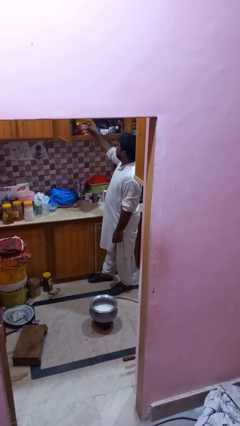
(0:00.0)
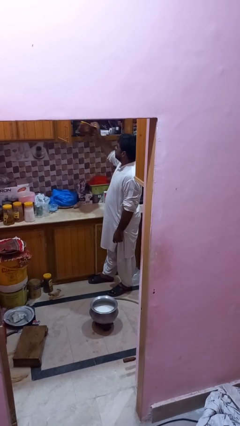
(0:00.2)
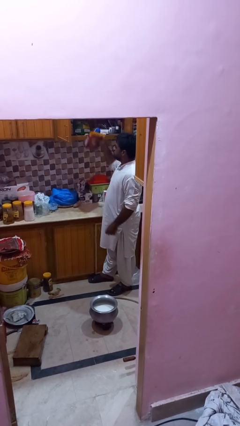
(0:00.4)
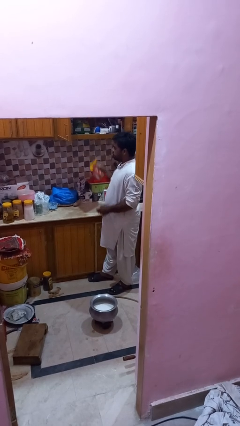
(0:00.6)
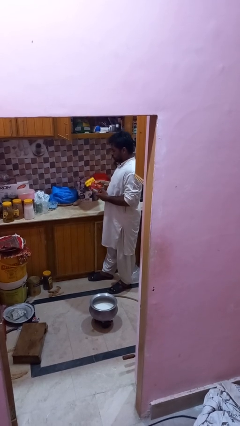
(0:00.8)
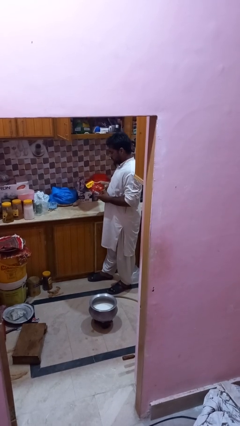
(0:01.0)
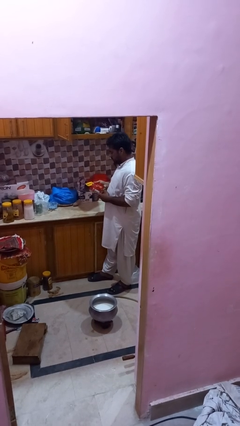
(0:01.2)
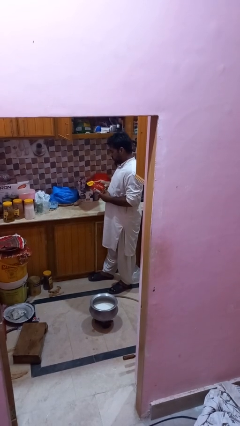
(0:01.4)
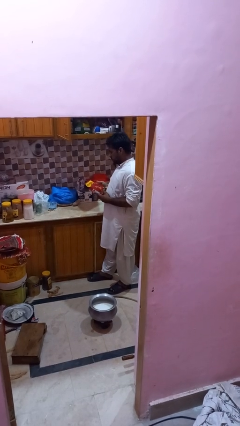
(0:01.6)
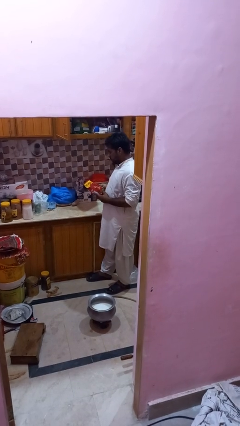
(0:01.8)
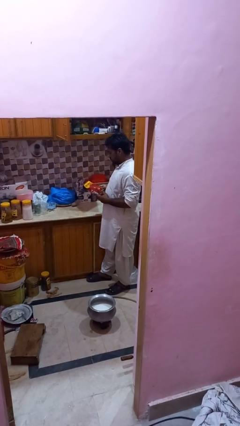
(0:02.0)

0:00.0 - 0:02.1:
person picks up object from cabinet

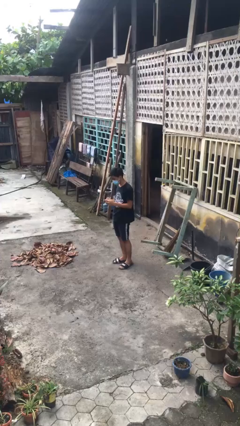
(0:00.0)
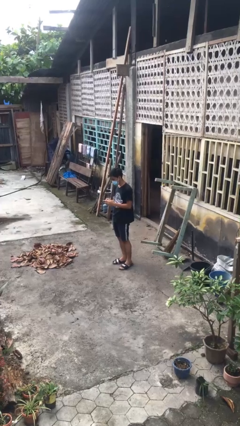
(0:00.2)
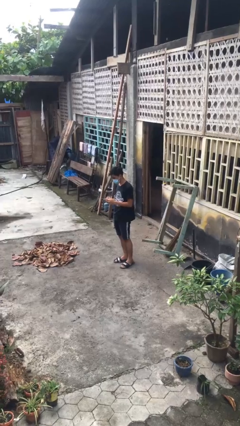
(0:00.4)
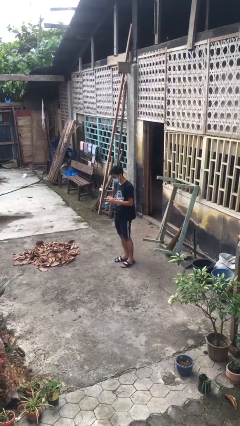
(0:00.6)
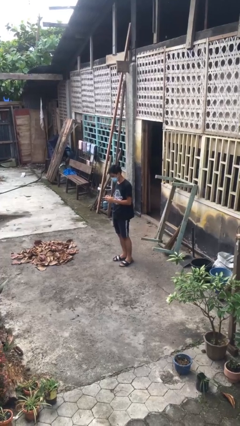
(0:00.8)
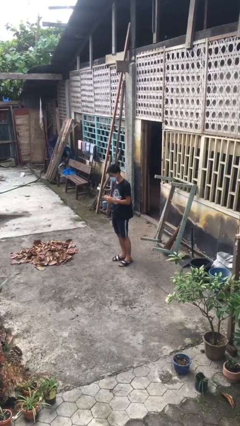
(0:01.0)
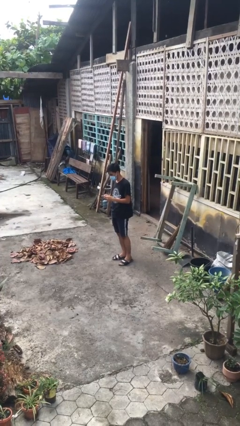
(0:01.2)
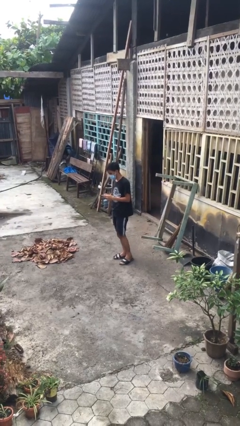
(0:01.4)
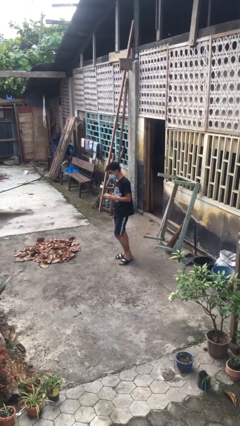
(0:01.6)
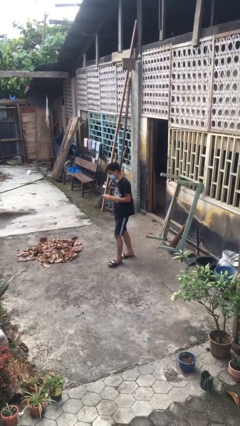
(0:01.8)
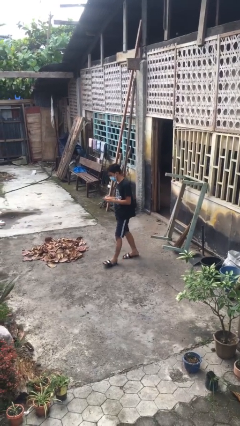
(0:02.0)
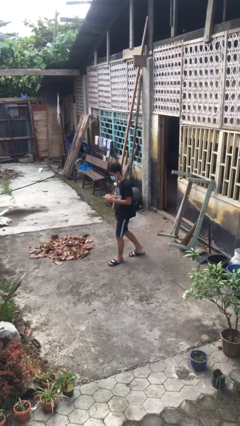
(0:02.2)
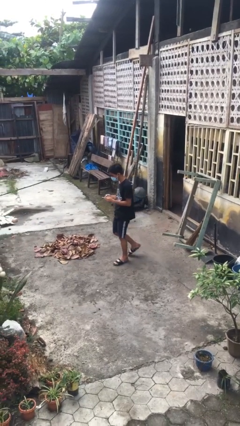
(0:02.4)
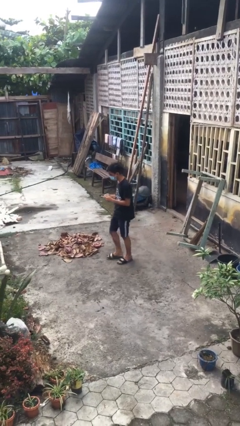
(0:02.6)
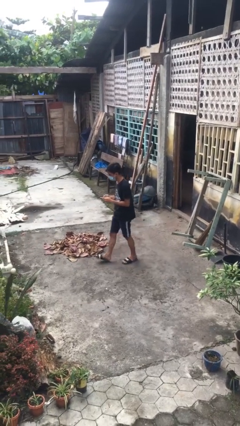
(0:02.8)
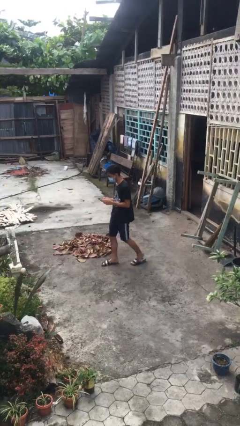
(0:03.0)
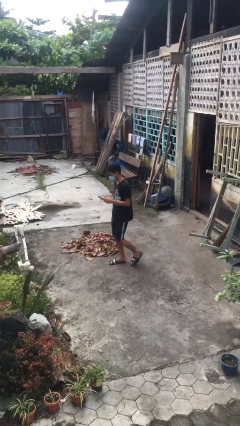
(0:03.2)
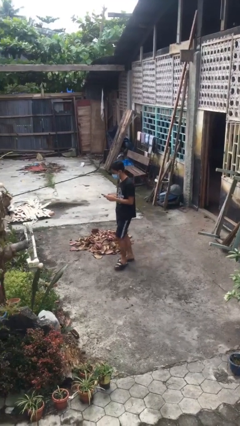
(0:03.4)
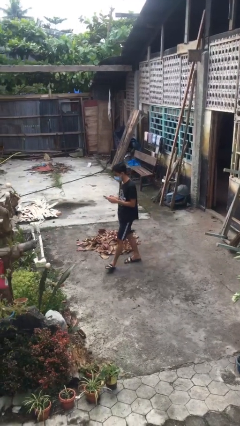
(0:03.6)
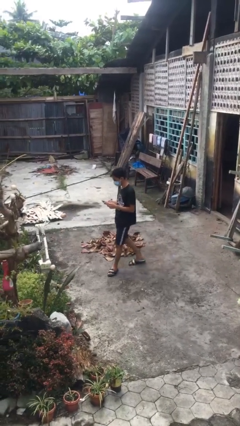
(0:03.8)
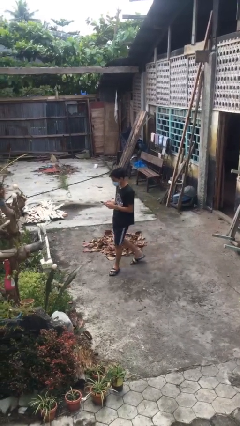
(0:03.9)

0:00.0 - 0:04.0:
person texts on phone

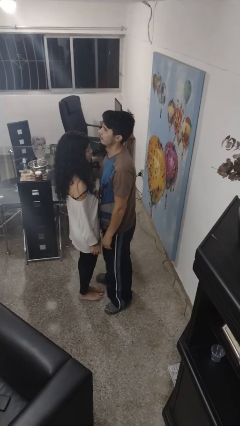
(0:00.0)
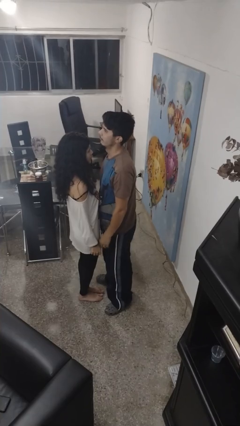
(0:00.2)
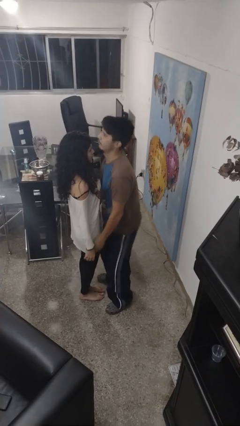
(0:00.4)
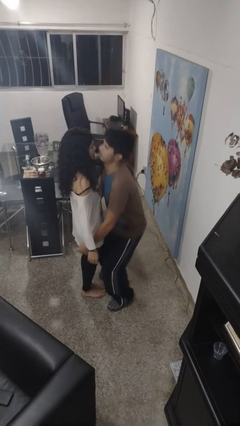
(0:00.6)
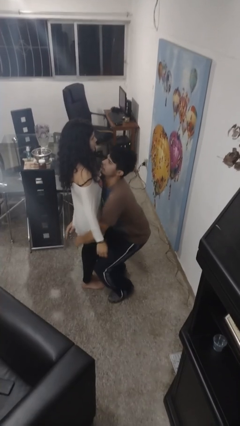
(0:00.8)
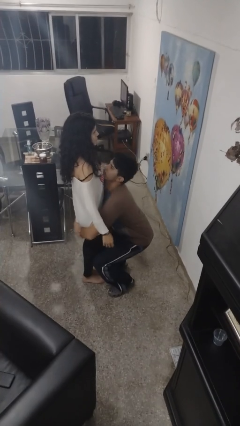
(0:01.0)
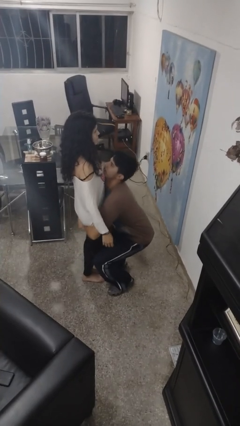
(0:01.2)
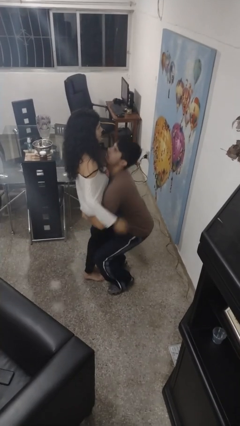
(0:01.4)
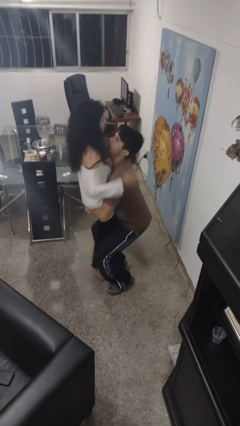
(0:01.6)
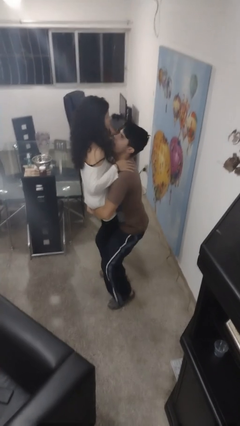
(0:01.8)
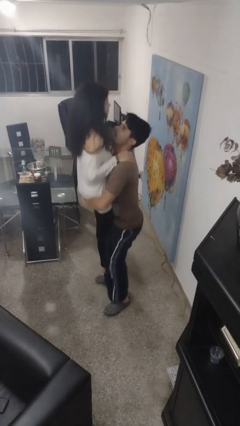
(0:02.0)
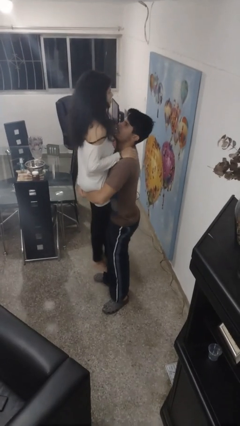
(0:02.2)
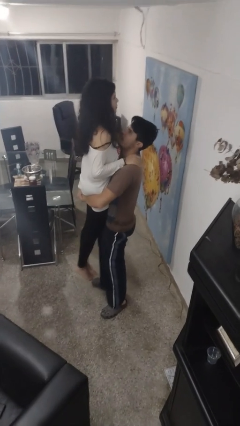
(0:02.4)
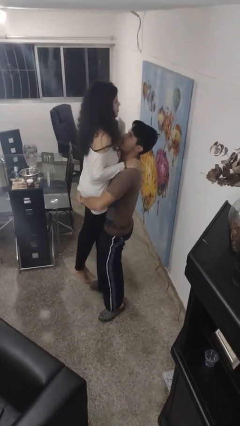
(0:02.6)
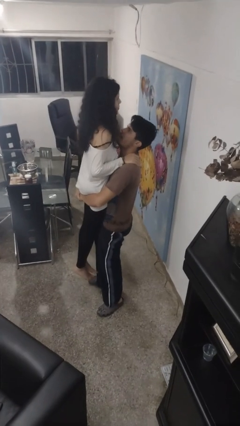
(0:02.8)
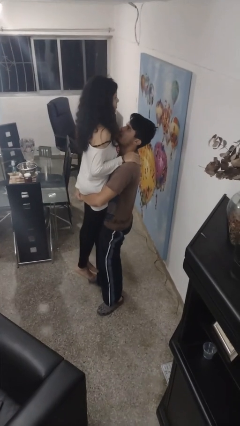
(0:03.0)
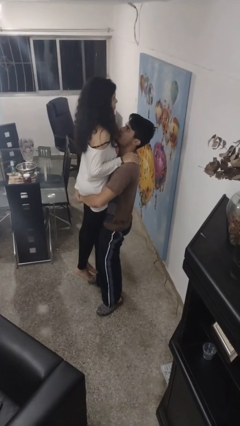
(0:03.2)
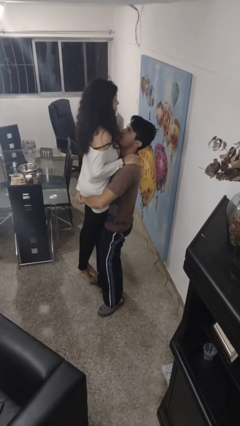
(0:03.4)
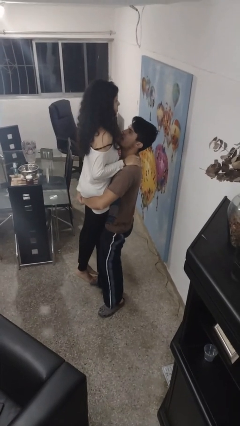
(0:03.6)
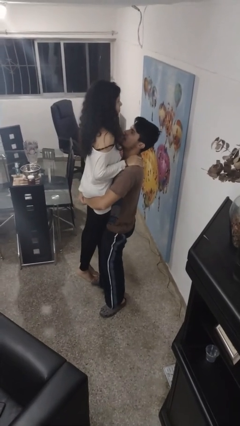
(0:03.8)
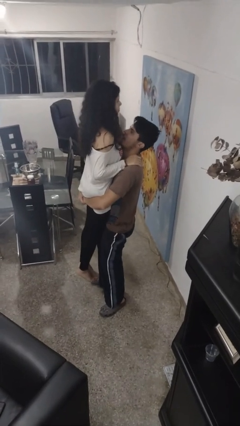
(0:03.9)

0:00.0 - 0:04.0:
person picks up person

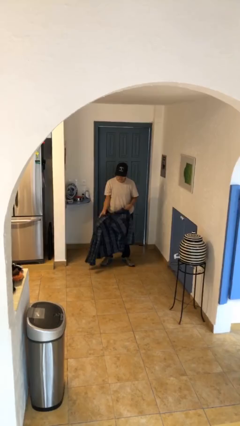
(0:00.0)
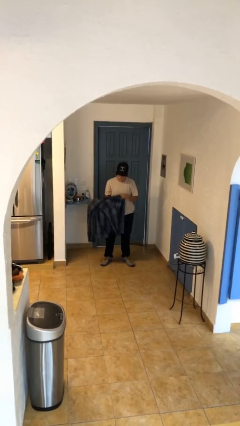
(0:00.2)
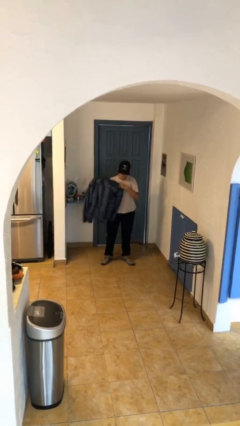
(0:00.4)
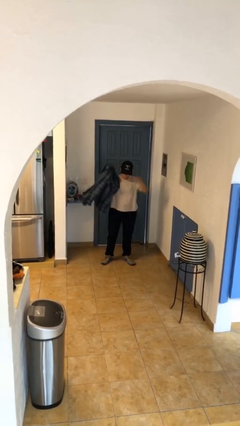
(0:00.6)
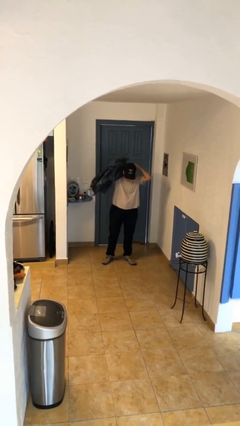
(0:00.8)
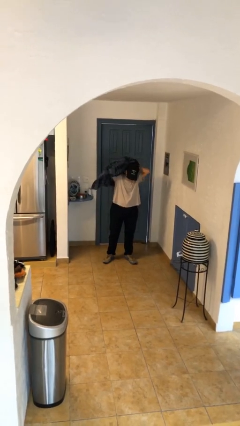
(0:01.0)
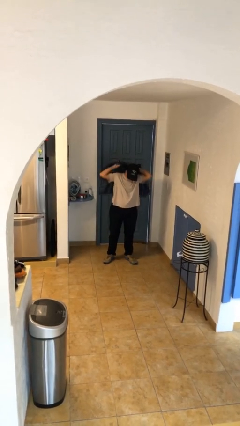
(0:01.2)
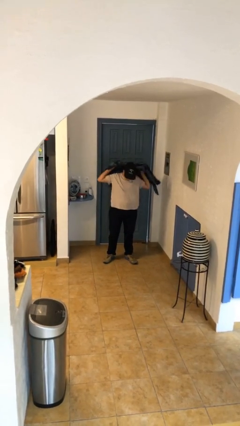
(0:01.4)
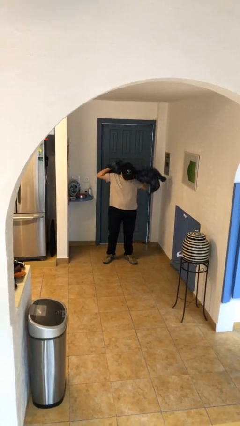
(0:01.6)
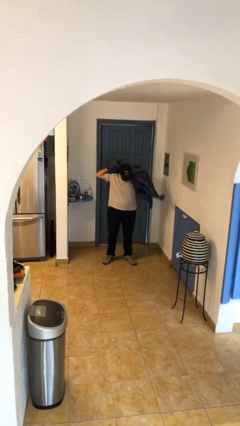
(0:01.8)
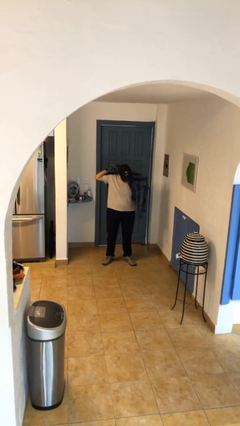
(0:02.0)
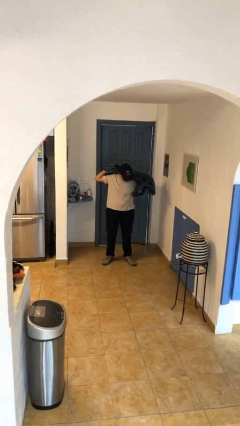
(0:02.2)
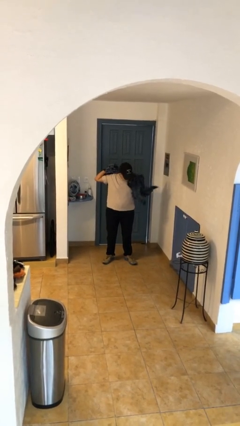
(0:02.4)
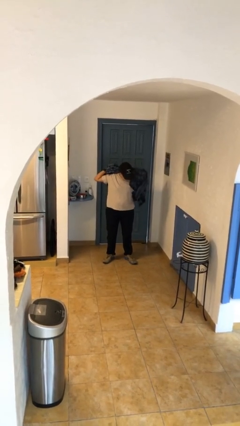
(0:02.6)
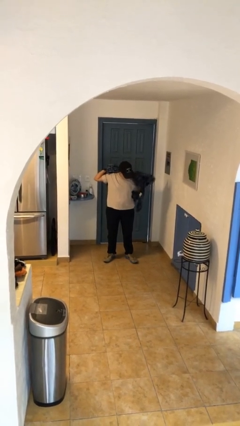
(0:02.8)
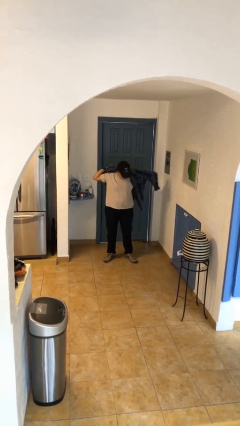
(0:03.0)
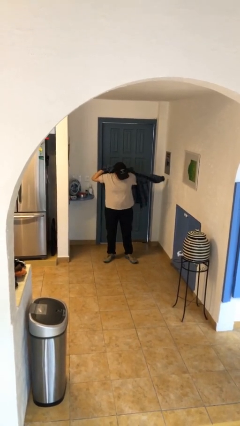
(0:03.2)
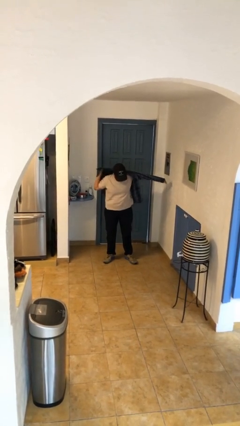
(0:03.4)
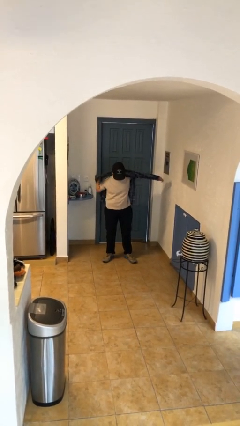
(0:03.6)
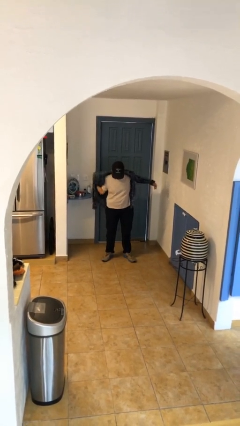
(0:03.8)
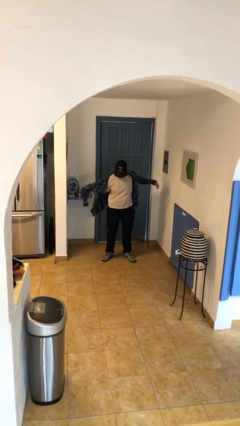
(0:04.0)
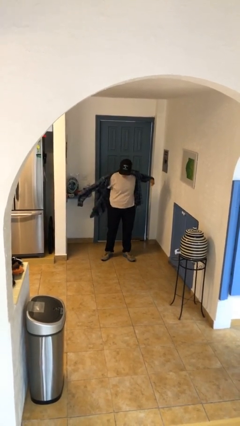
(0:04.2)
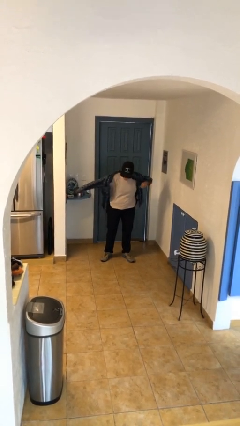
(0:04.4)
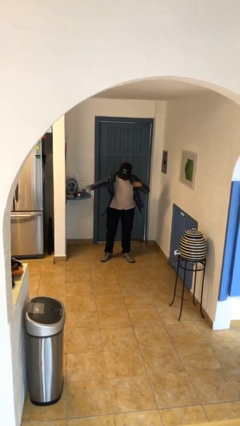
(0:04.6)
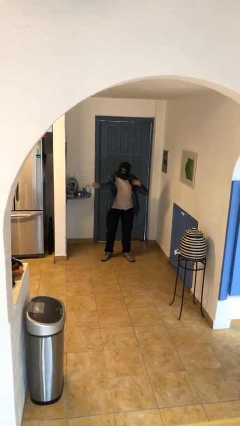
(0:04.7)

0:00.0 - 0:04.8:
person puts on shirt

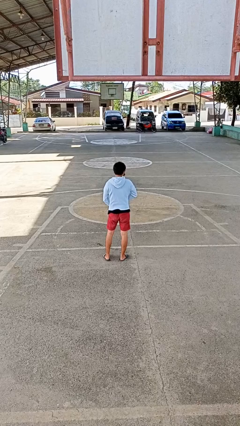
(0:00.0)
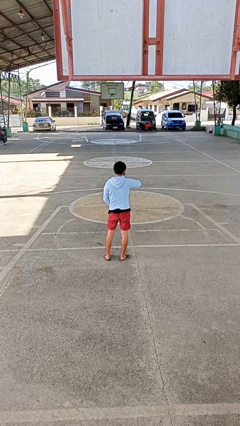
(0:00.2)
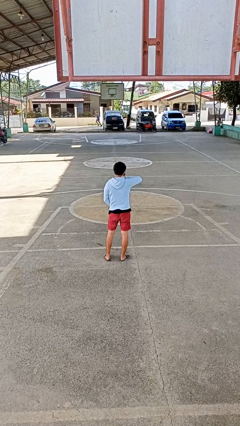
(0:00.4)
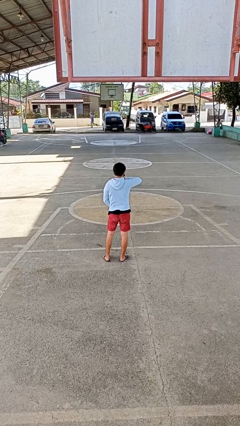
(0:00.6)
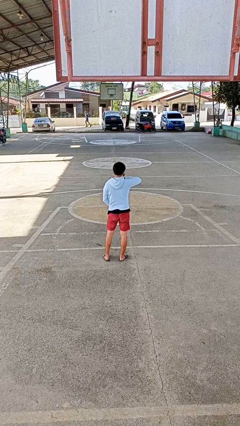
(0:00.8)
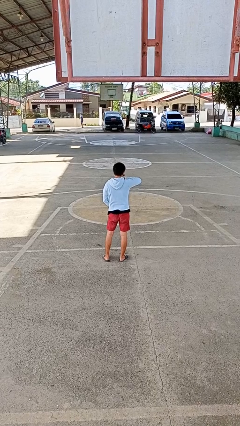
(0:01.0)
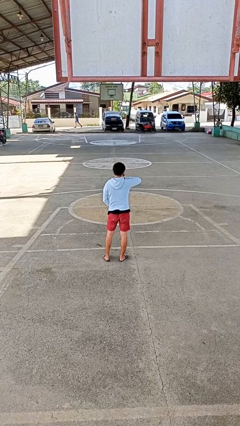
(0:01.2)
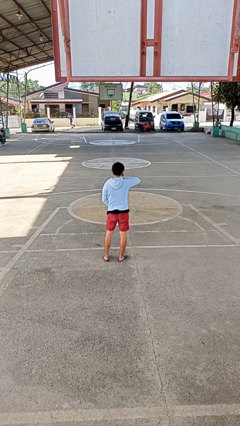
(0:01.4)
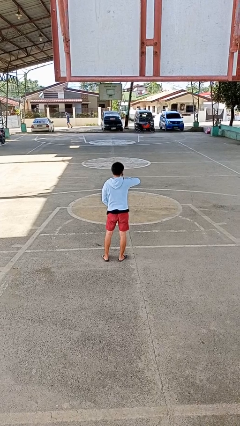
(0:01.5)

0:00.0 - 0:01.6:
person zips up jacket

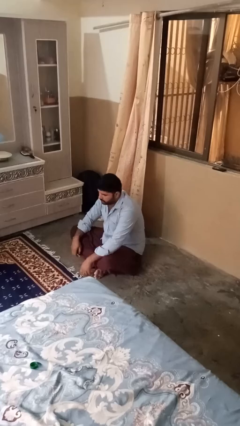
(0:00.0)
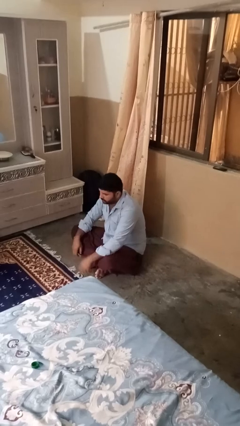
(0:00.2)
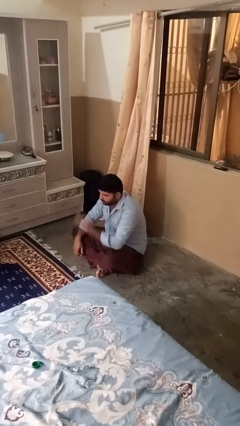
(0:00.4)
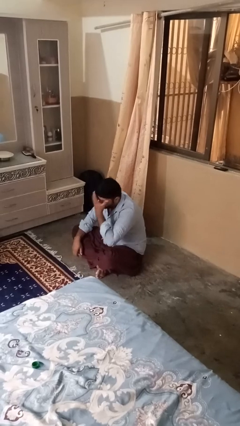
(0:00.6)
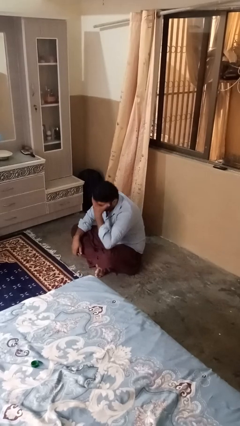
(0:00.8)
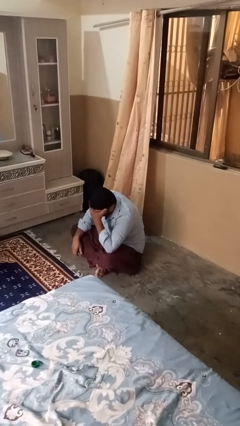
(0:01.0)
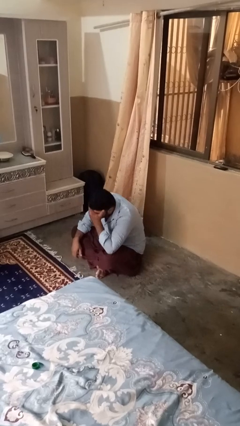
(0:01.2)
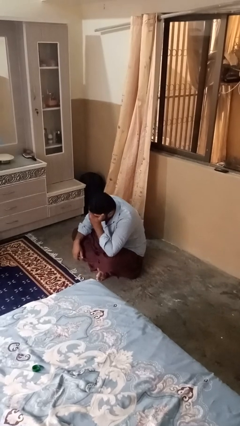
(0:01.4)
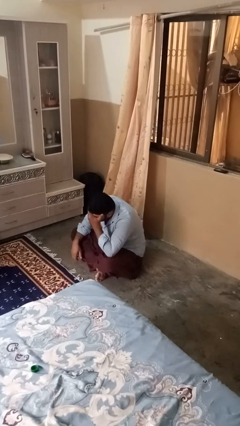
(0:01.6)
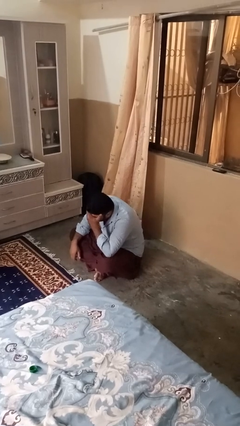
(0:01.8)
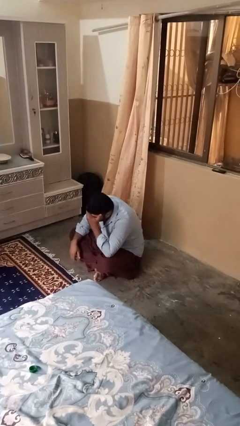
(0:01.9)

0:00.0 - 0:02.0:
person covers face with hands
